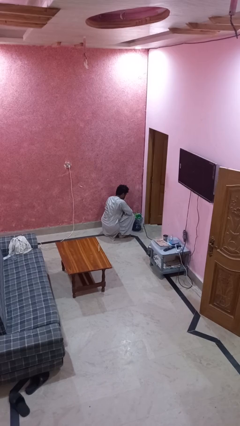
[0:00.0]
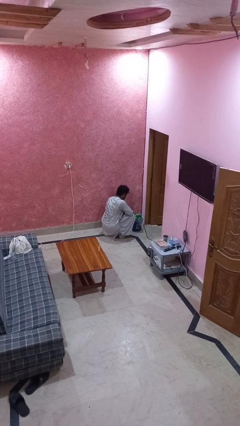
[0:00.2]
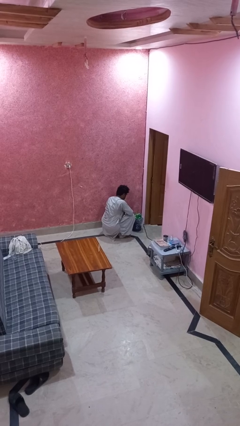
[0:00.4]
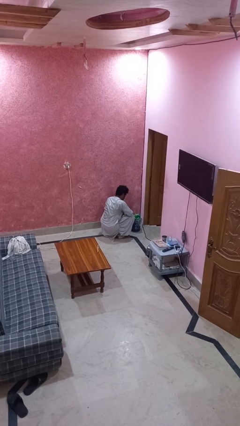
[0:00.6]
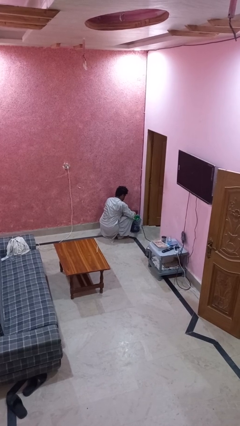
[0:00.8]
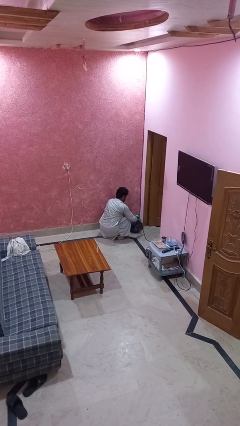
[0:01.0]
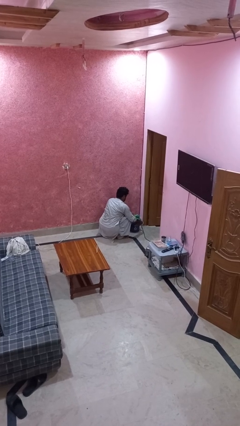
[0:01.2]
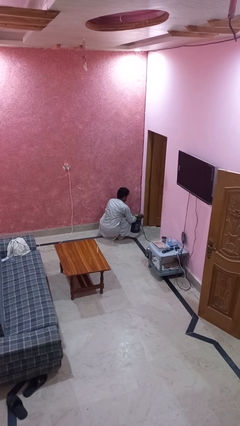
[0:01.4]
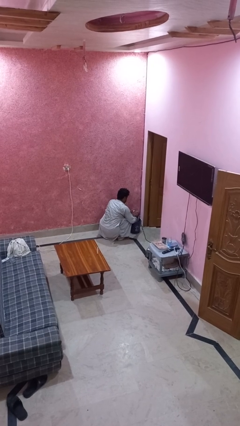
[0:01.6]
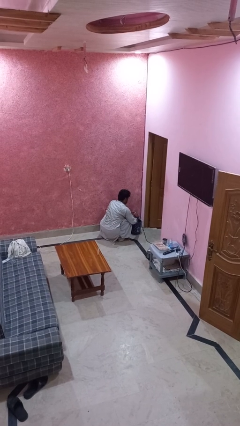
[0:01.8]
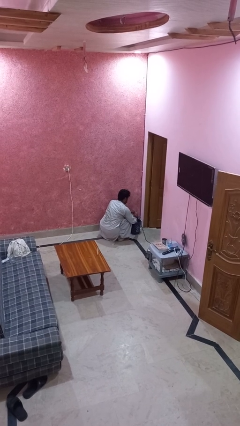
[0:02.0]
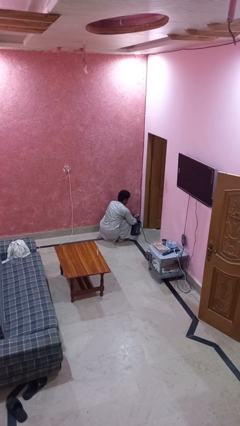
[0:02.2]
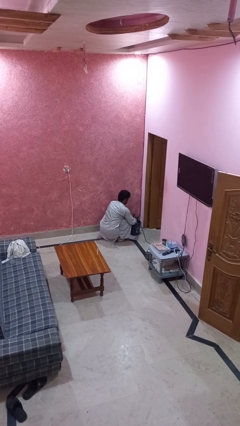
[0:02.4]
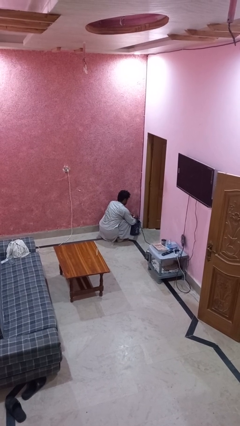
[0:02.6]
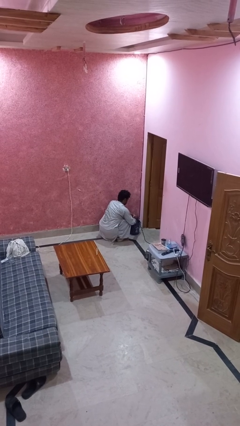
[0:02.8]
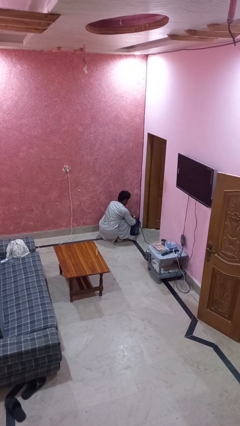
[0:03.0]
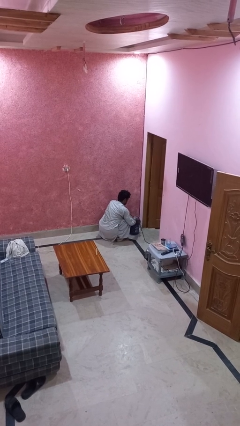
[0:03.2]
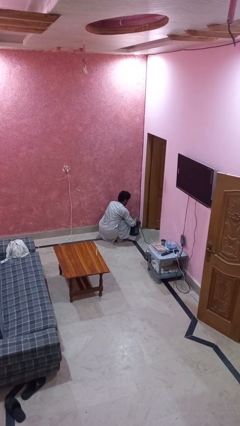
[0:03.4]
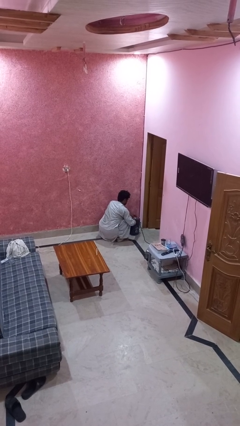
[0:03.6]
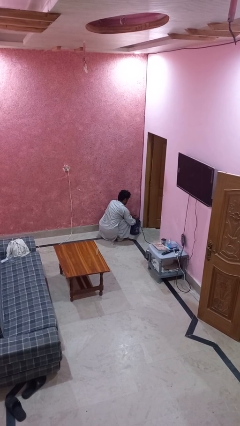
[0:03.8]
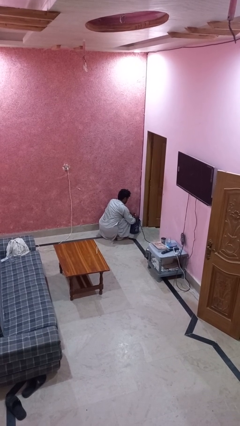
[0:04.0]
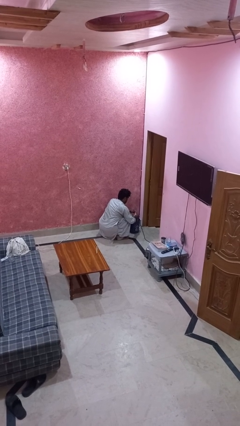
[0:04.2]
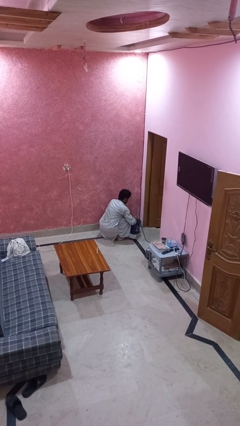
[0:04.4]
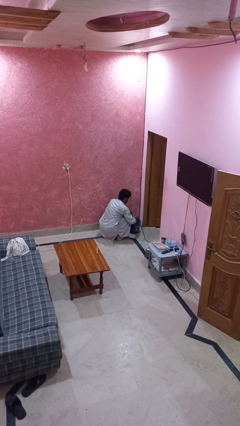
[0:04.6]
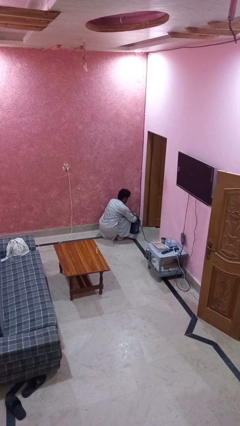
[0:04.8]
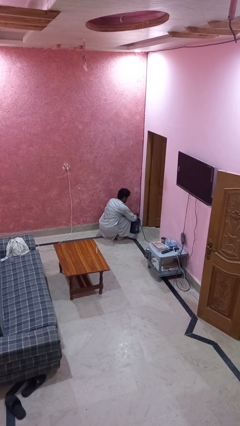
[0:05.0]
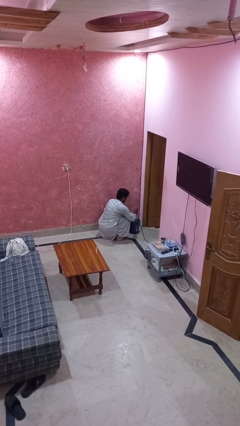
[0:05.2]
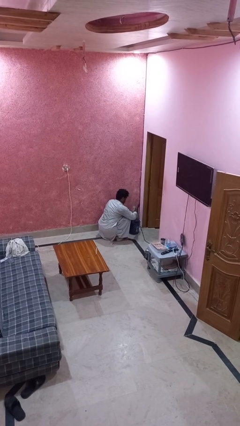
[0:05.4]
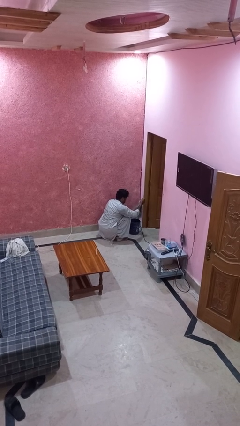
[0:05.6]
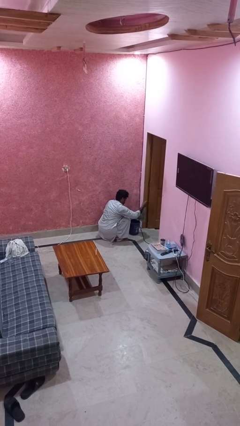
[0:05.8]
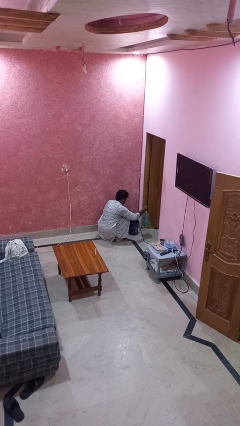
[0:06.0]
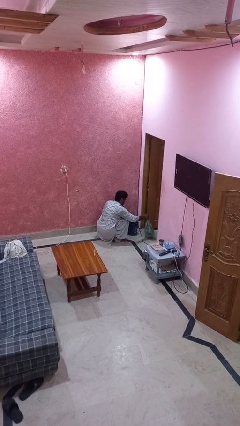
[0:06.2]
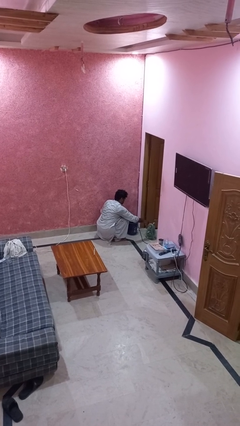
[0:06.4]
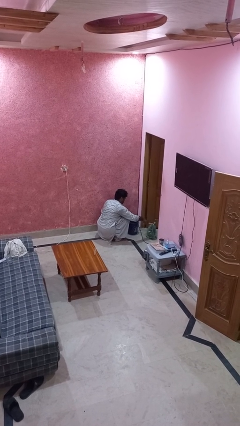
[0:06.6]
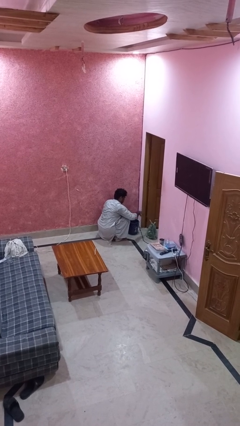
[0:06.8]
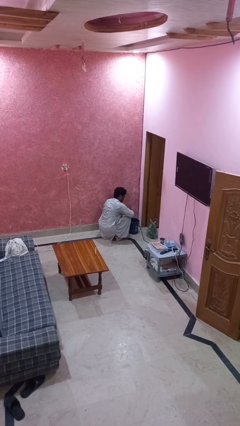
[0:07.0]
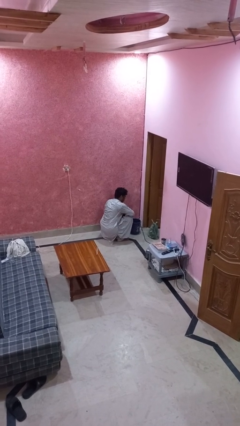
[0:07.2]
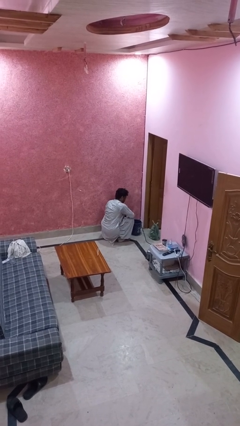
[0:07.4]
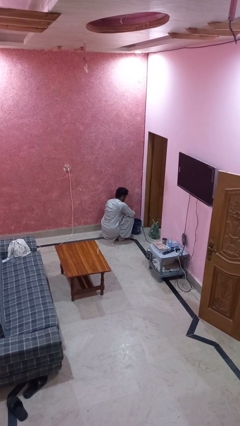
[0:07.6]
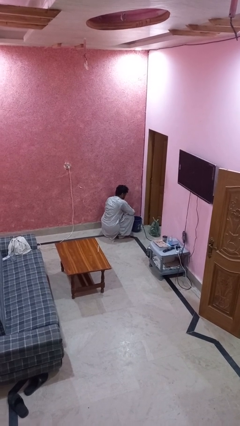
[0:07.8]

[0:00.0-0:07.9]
person removes trashbag from trashcan

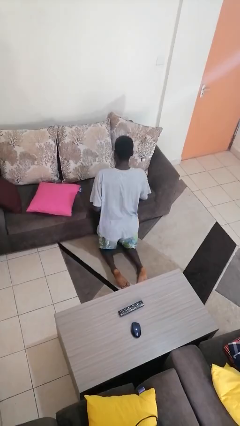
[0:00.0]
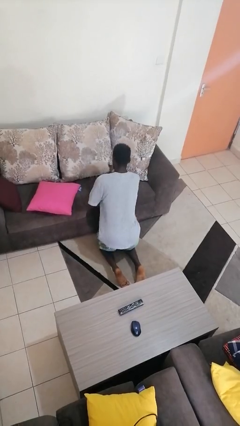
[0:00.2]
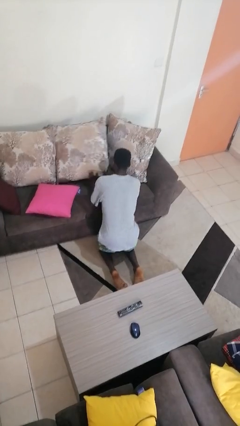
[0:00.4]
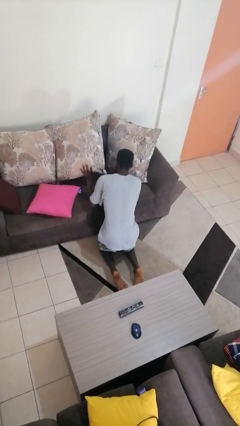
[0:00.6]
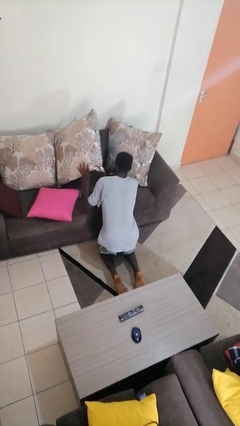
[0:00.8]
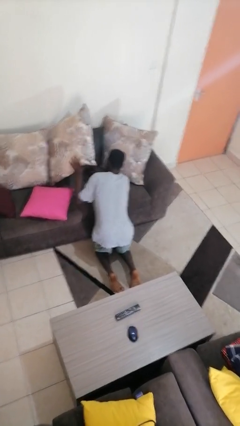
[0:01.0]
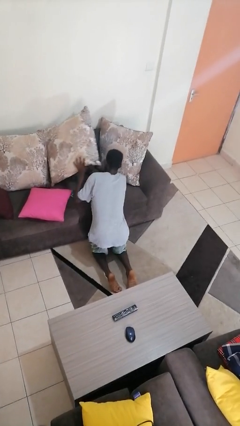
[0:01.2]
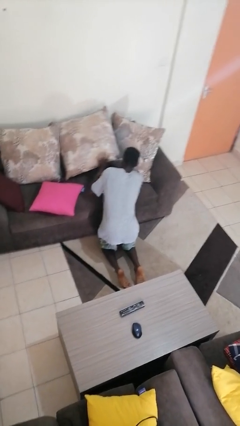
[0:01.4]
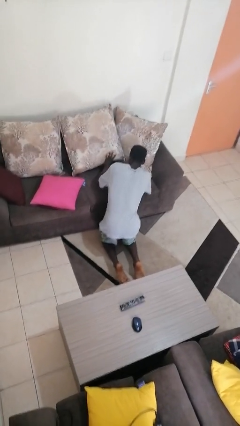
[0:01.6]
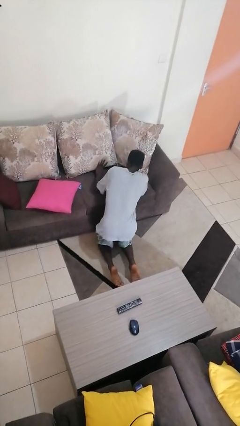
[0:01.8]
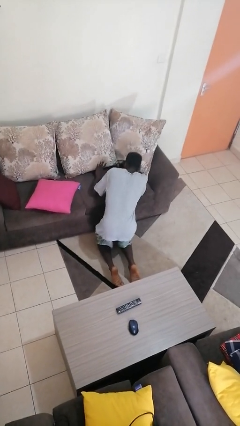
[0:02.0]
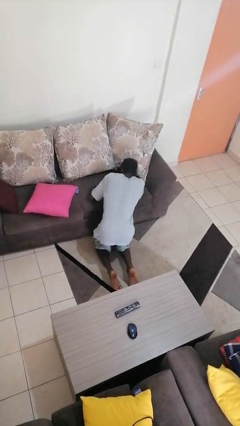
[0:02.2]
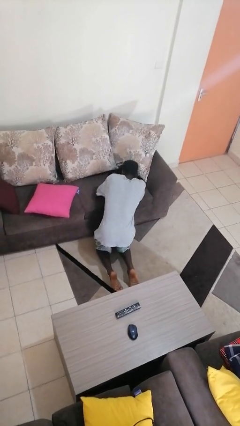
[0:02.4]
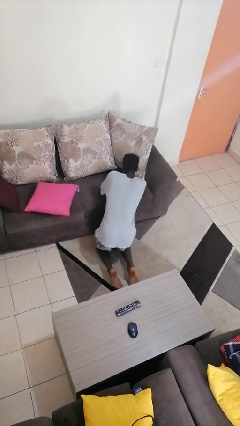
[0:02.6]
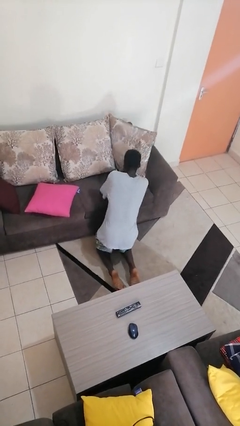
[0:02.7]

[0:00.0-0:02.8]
person searches in couch

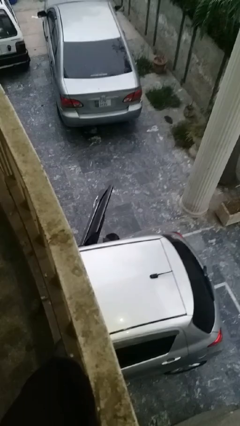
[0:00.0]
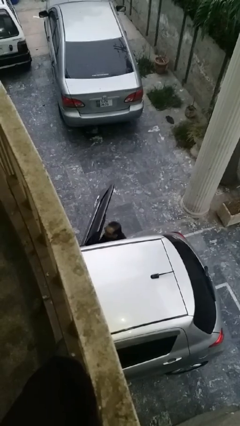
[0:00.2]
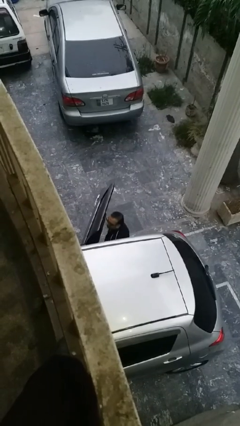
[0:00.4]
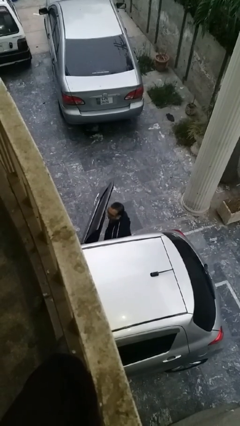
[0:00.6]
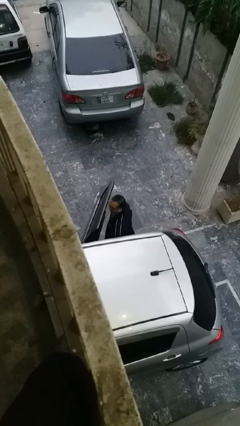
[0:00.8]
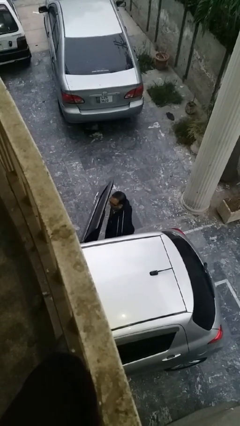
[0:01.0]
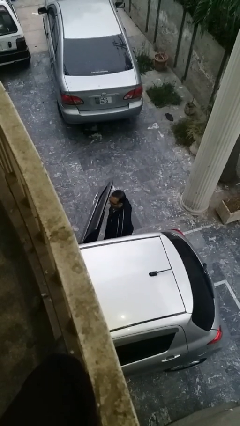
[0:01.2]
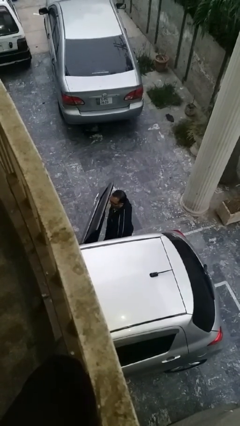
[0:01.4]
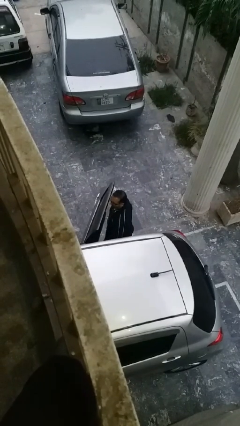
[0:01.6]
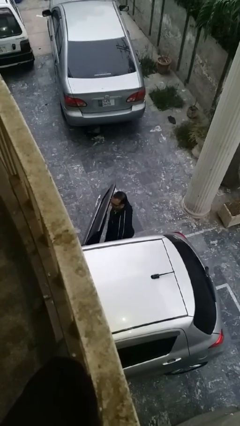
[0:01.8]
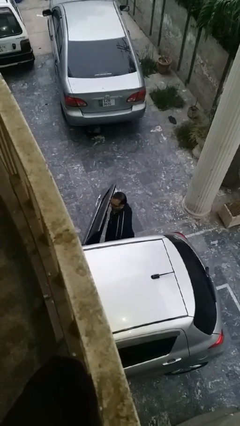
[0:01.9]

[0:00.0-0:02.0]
person exits car

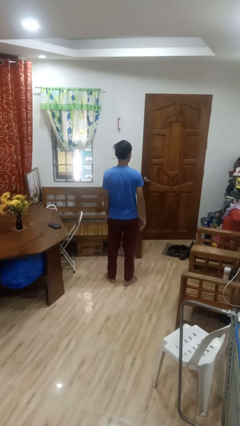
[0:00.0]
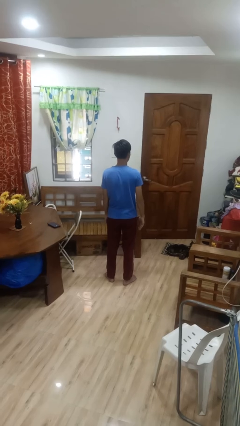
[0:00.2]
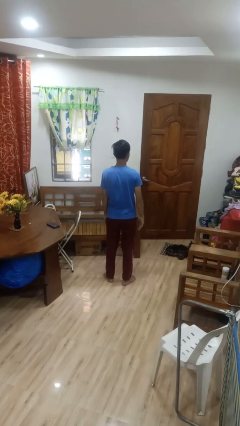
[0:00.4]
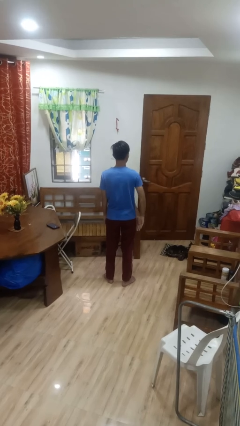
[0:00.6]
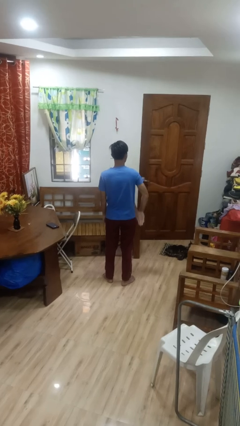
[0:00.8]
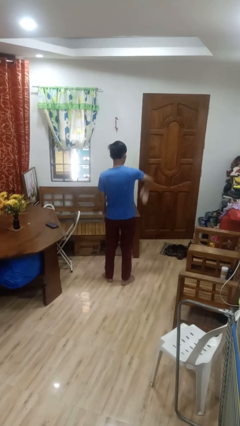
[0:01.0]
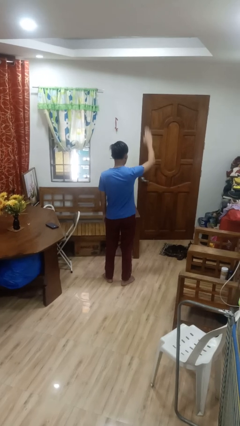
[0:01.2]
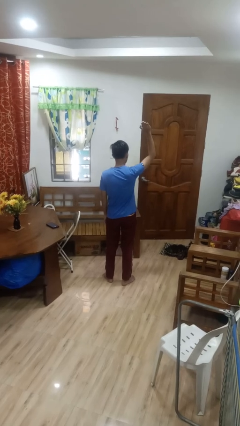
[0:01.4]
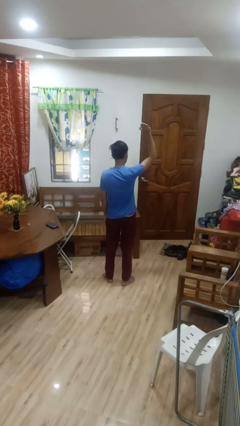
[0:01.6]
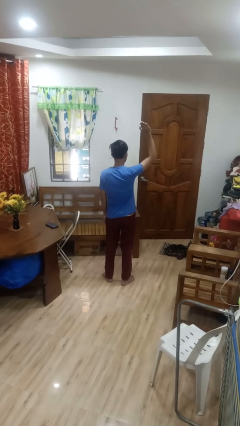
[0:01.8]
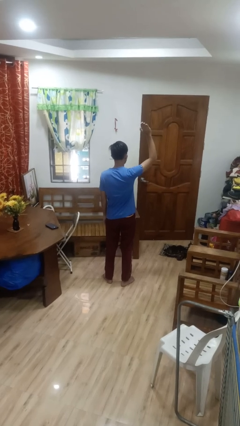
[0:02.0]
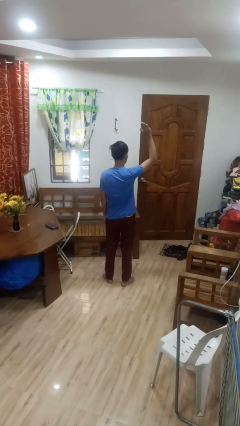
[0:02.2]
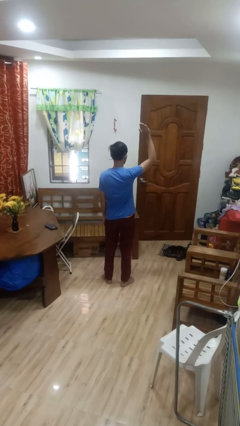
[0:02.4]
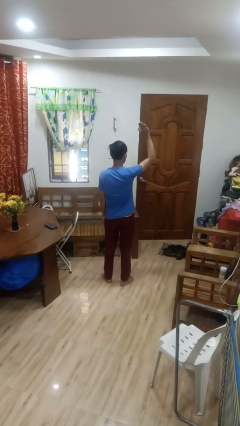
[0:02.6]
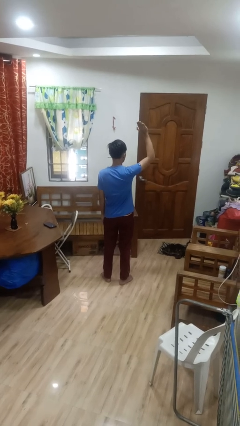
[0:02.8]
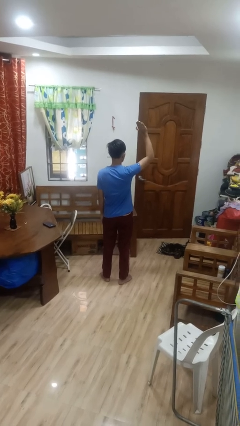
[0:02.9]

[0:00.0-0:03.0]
person gestures swipe up

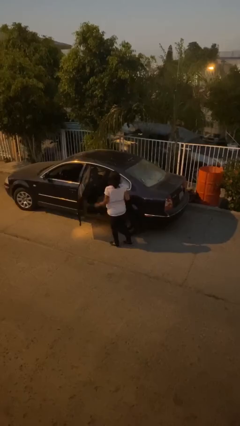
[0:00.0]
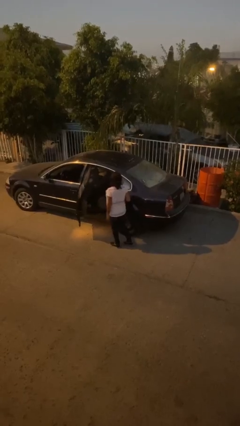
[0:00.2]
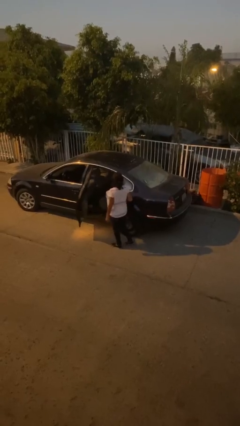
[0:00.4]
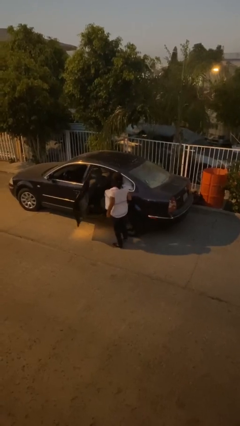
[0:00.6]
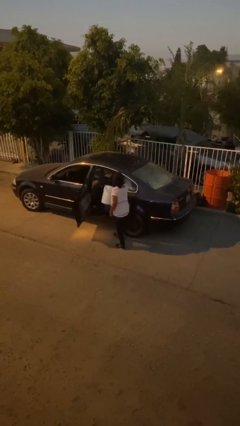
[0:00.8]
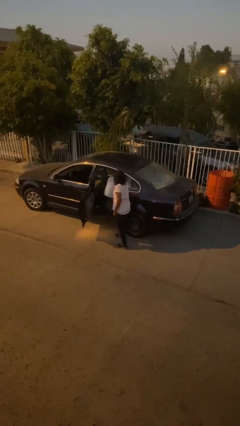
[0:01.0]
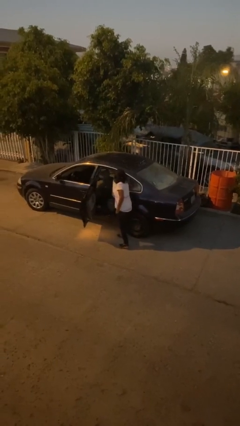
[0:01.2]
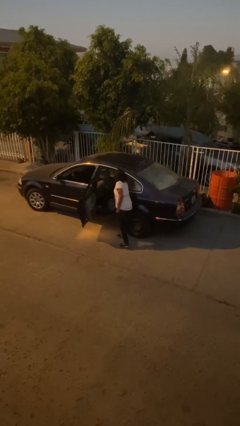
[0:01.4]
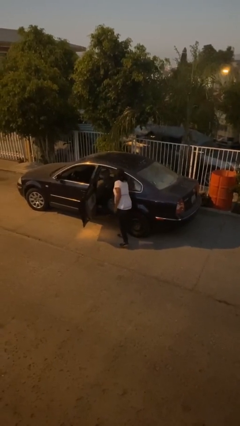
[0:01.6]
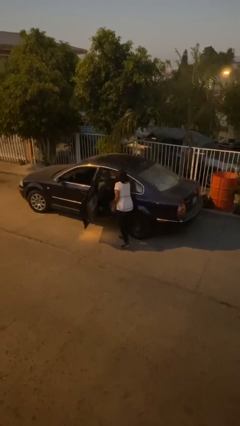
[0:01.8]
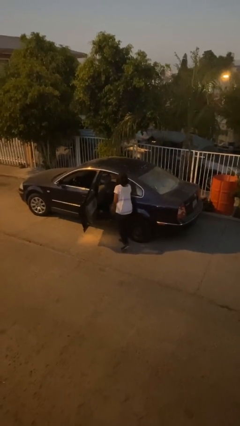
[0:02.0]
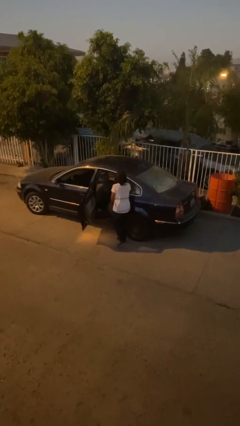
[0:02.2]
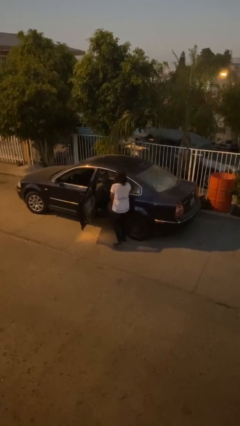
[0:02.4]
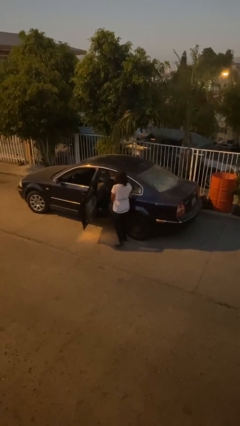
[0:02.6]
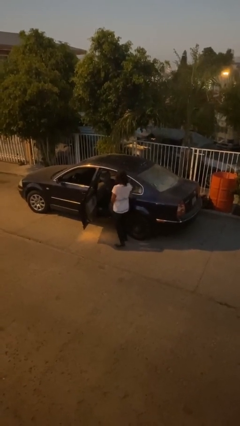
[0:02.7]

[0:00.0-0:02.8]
person loads car
